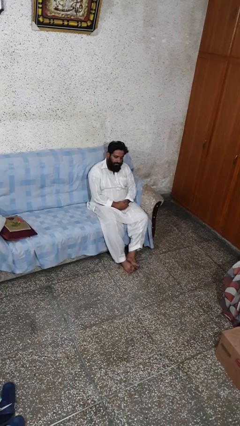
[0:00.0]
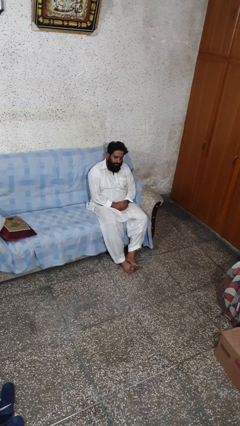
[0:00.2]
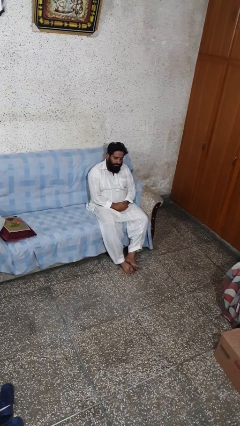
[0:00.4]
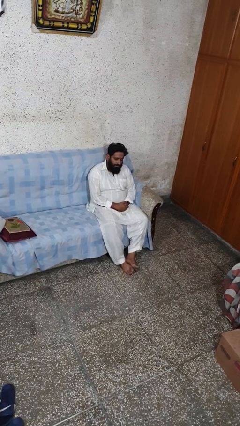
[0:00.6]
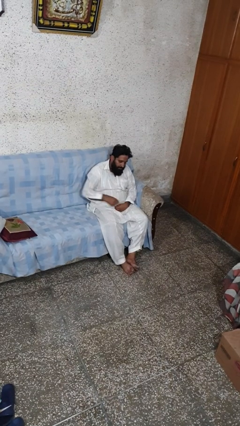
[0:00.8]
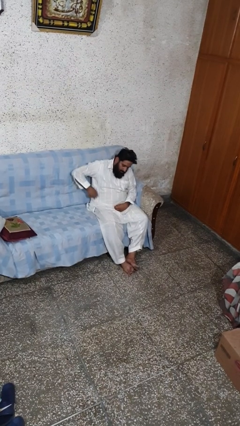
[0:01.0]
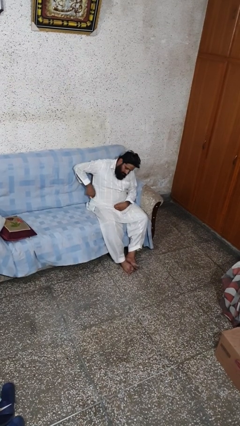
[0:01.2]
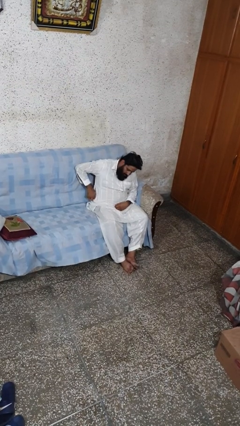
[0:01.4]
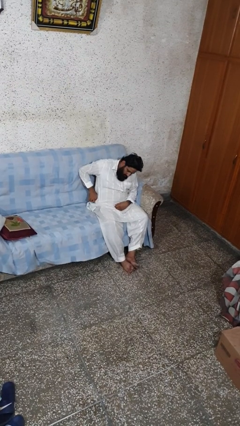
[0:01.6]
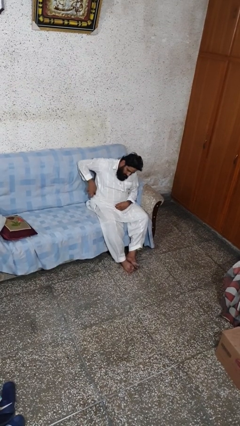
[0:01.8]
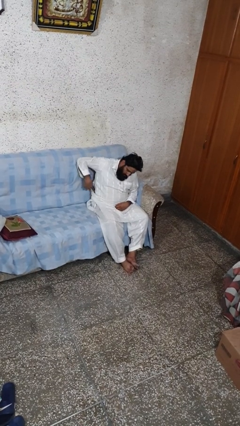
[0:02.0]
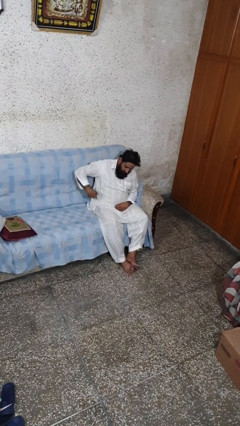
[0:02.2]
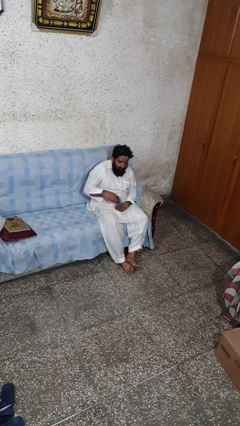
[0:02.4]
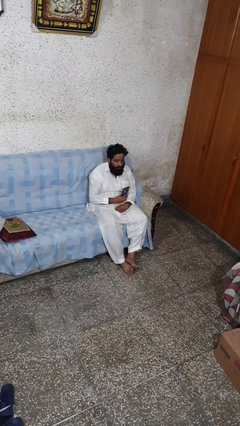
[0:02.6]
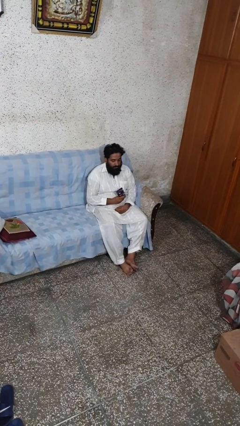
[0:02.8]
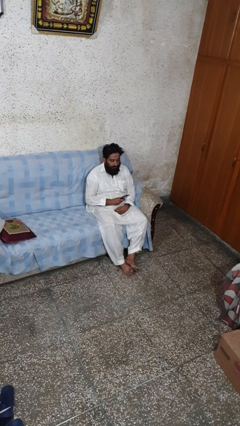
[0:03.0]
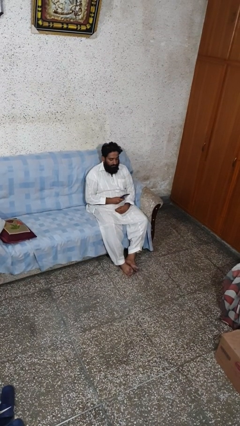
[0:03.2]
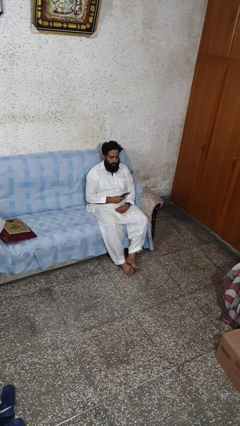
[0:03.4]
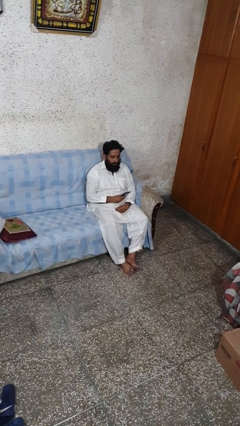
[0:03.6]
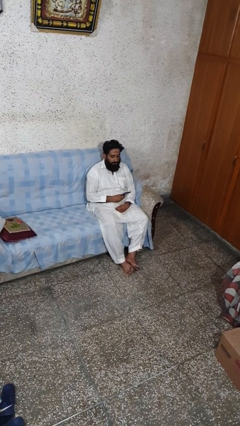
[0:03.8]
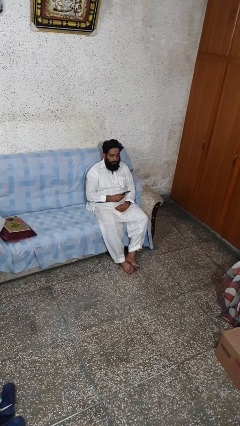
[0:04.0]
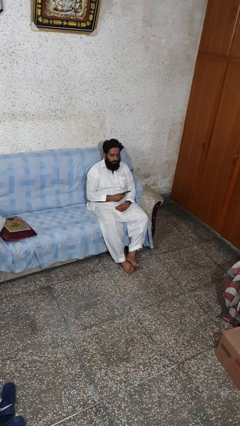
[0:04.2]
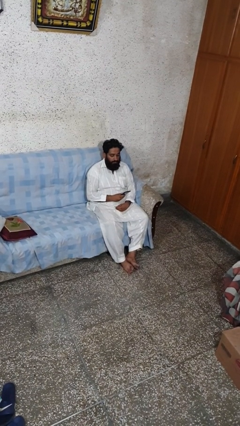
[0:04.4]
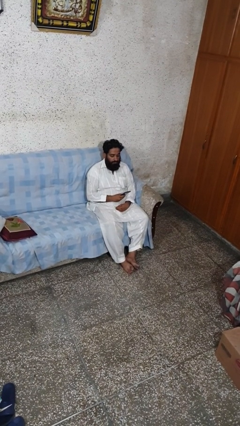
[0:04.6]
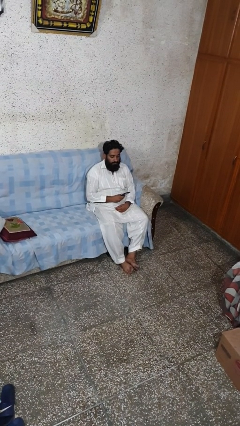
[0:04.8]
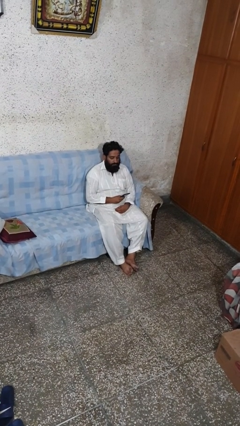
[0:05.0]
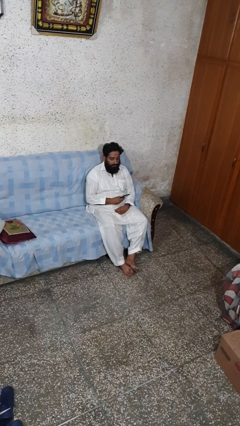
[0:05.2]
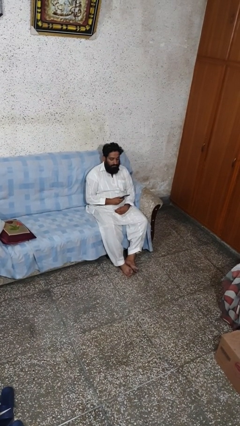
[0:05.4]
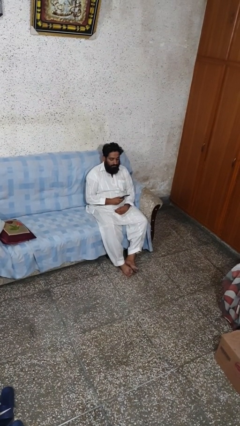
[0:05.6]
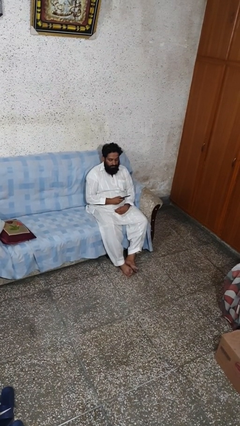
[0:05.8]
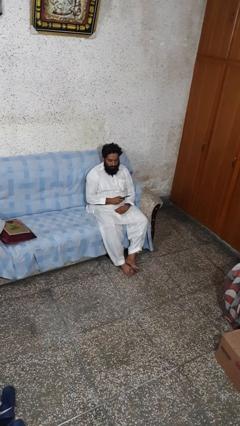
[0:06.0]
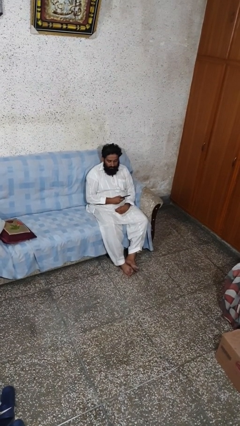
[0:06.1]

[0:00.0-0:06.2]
person takes phone from pocket

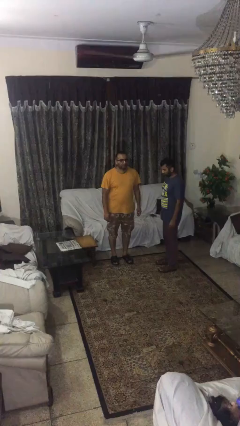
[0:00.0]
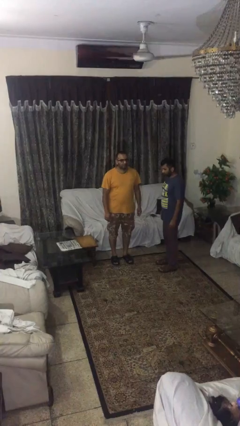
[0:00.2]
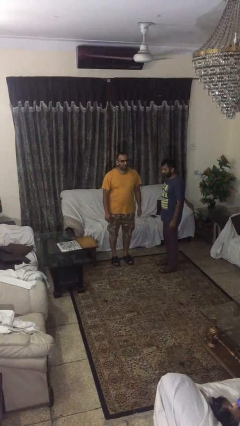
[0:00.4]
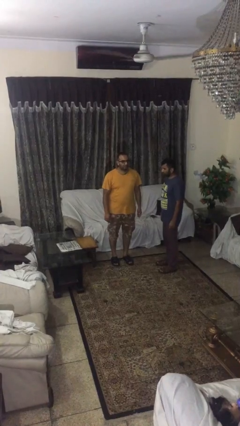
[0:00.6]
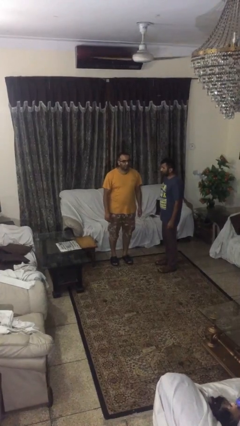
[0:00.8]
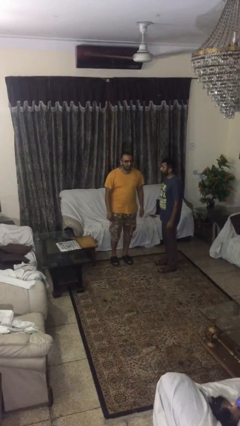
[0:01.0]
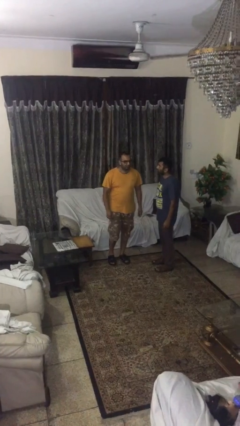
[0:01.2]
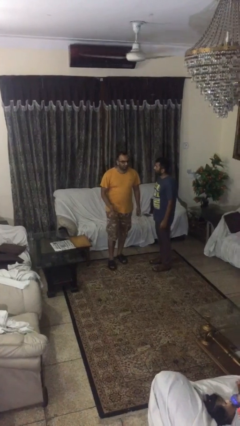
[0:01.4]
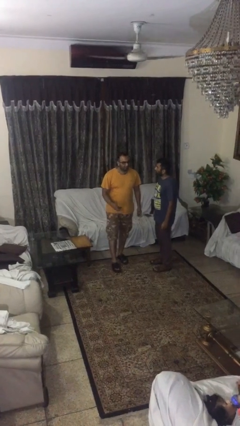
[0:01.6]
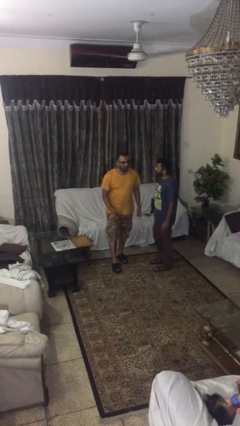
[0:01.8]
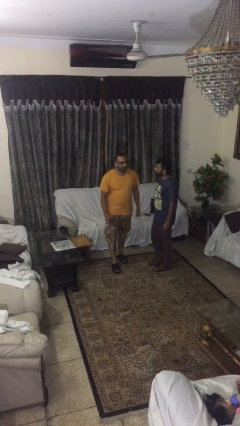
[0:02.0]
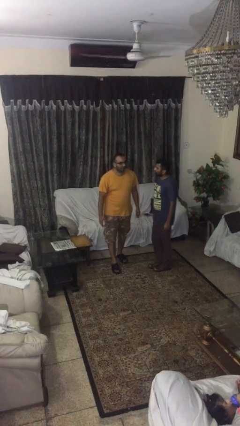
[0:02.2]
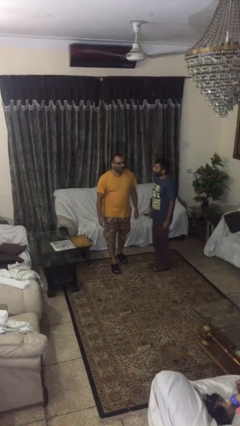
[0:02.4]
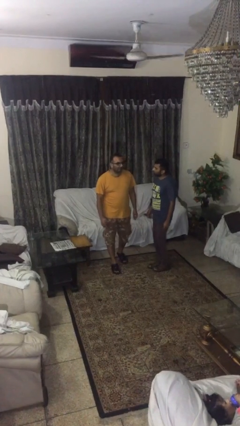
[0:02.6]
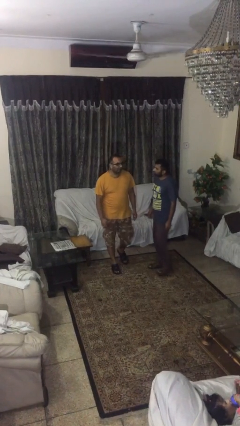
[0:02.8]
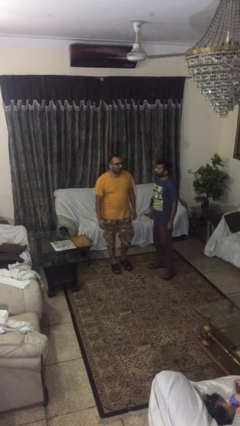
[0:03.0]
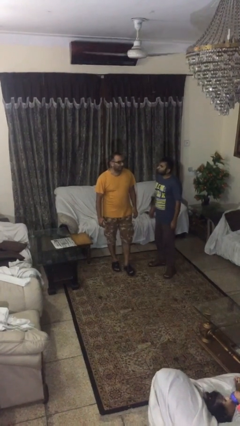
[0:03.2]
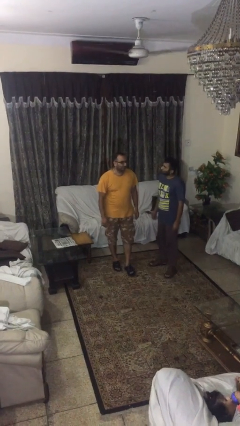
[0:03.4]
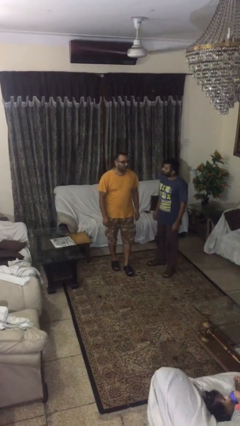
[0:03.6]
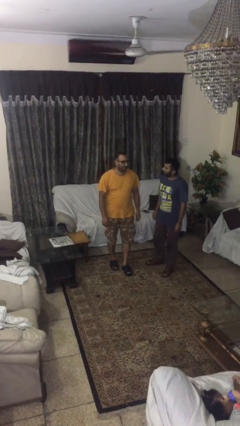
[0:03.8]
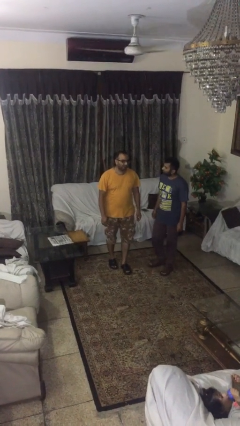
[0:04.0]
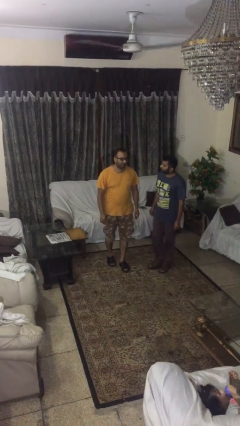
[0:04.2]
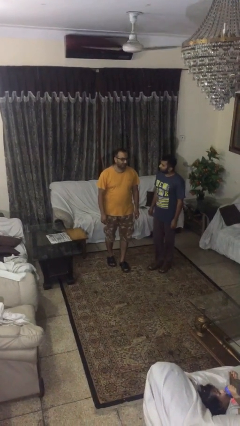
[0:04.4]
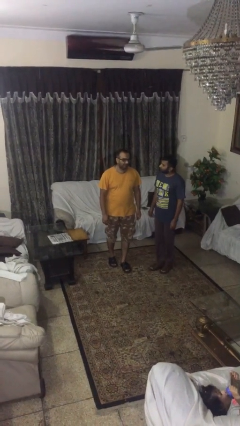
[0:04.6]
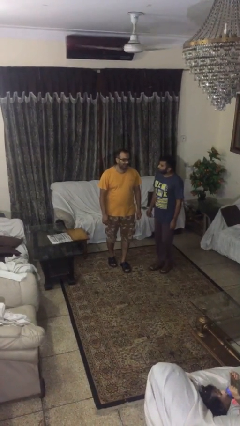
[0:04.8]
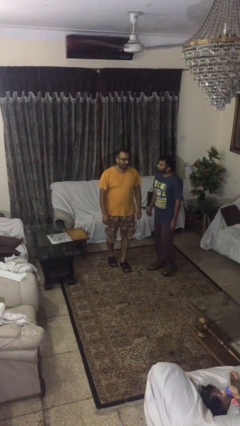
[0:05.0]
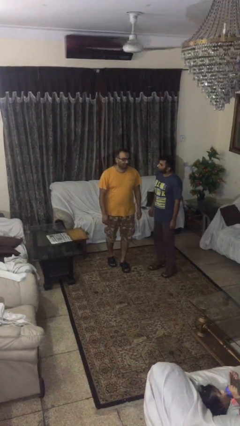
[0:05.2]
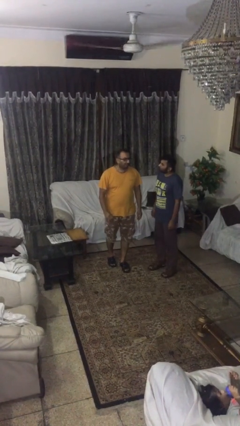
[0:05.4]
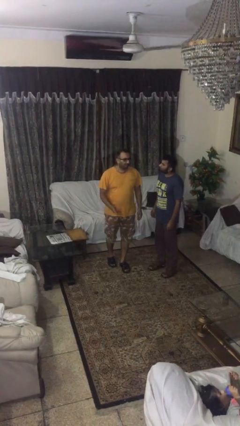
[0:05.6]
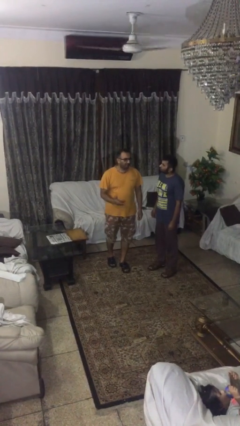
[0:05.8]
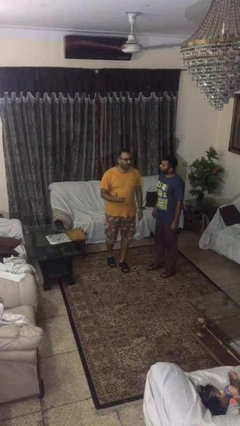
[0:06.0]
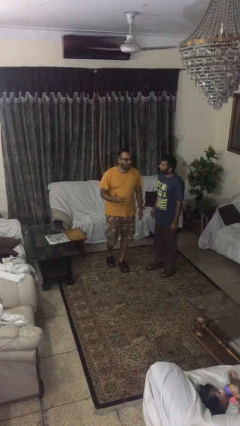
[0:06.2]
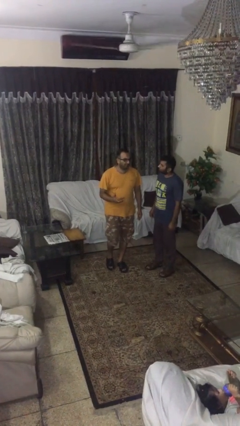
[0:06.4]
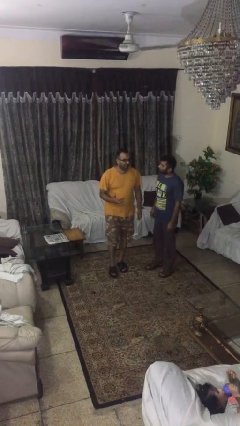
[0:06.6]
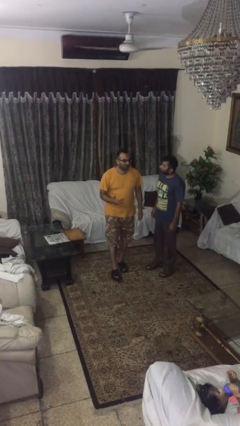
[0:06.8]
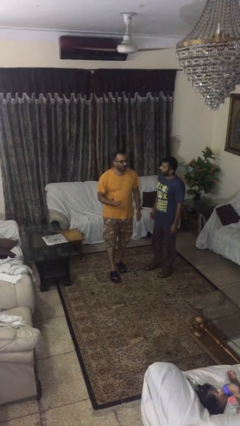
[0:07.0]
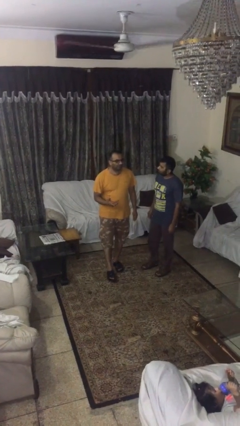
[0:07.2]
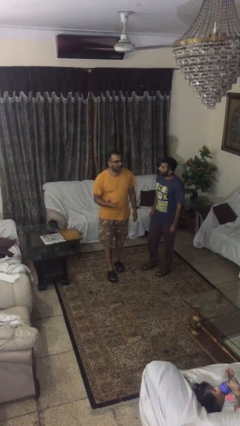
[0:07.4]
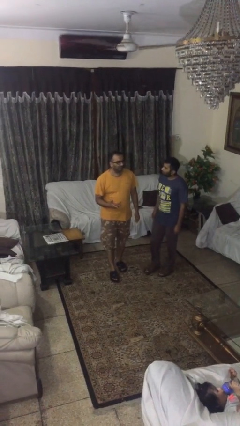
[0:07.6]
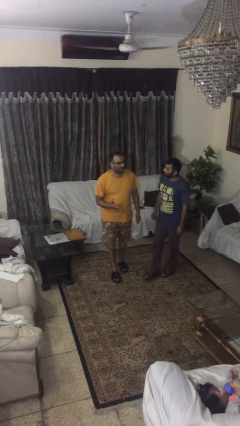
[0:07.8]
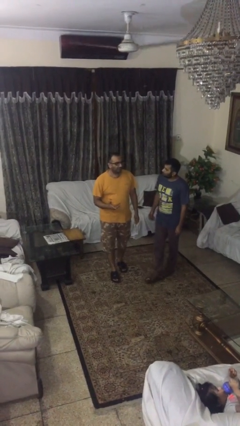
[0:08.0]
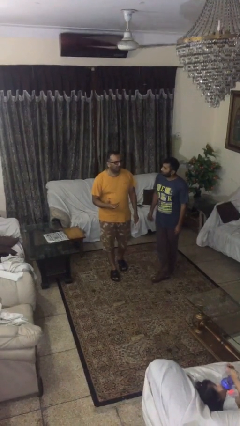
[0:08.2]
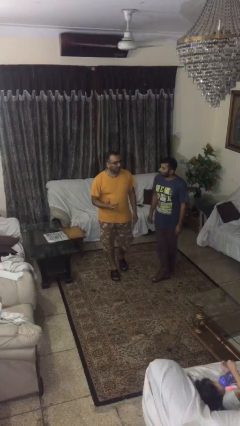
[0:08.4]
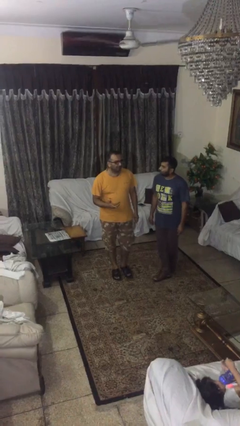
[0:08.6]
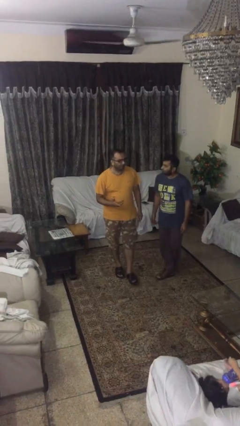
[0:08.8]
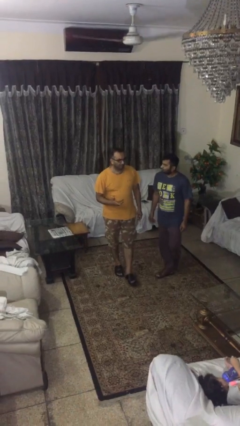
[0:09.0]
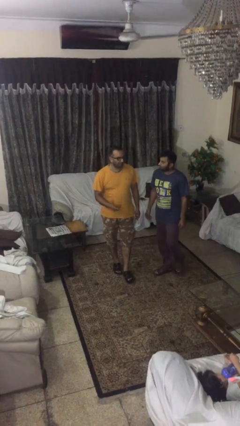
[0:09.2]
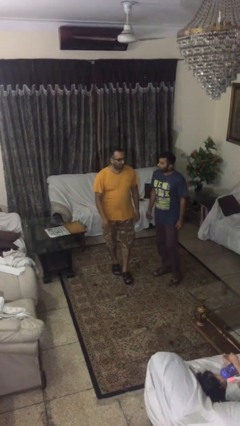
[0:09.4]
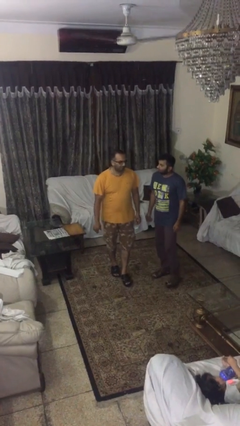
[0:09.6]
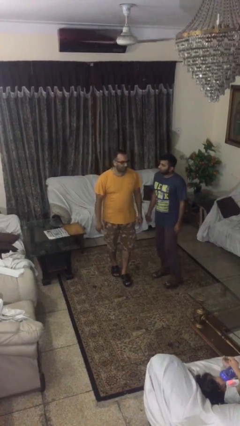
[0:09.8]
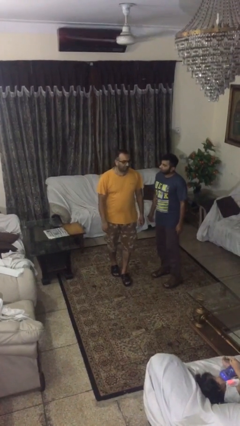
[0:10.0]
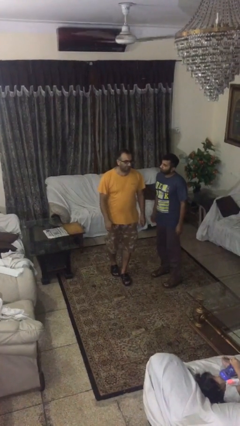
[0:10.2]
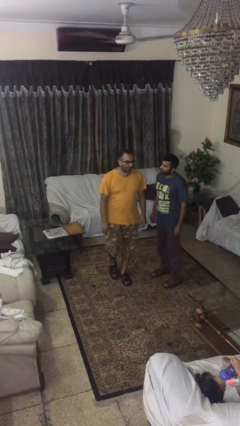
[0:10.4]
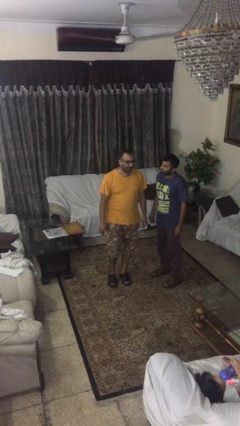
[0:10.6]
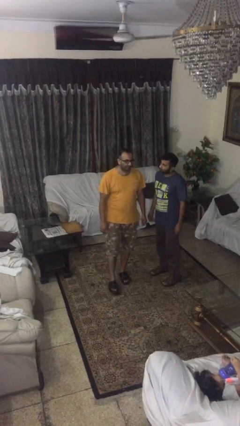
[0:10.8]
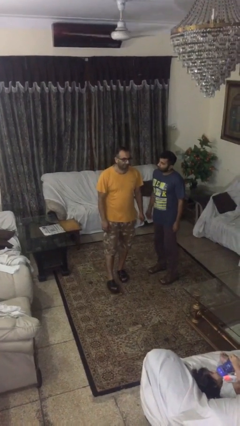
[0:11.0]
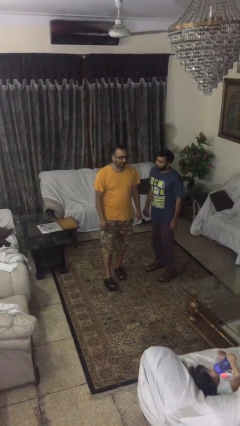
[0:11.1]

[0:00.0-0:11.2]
person talks to person

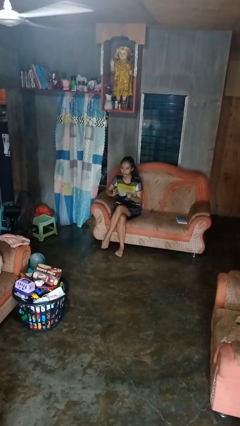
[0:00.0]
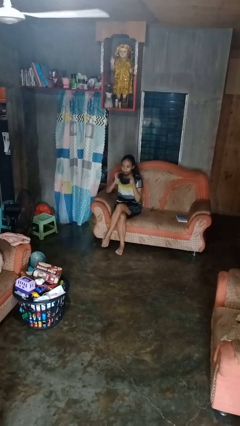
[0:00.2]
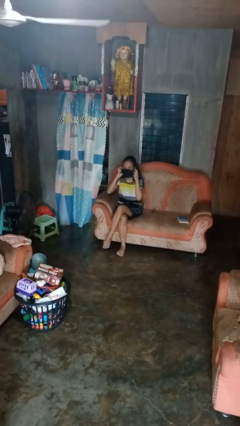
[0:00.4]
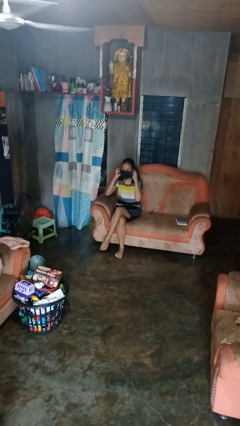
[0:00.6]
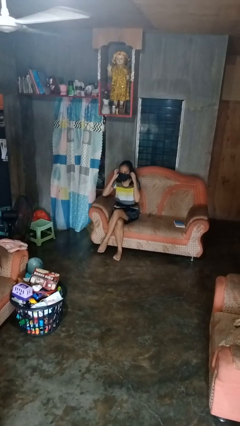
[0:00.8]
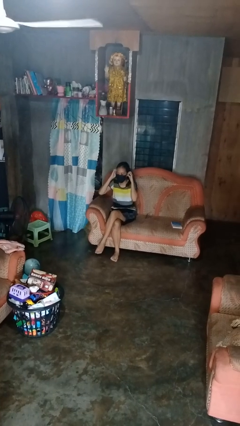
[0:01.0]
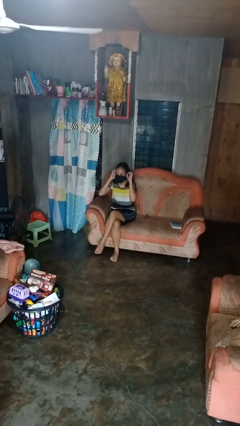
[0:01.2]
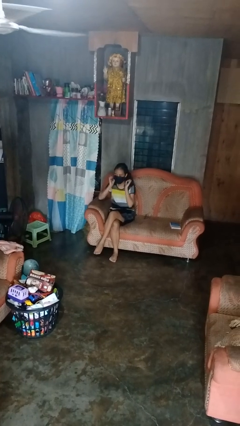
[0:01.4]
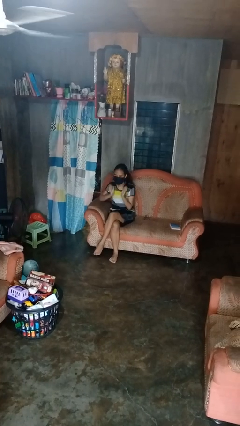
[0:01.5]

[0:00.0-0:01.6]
person puts on facemask
